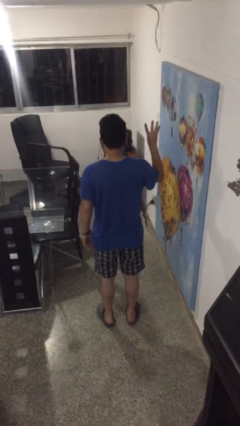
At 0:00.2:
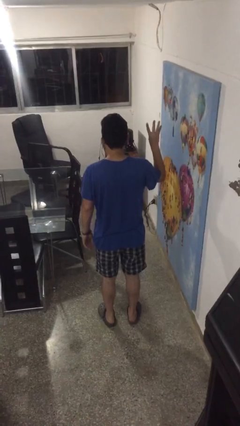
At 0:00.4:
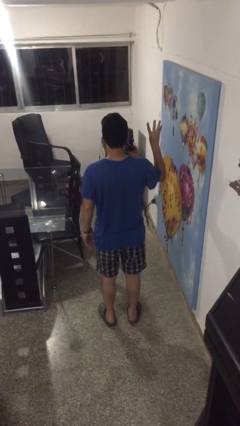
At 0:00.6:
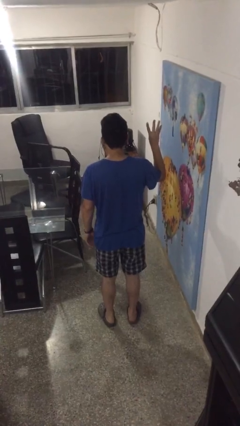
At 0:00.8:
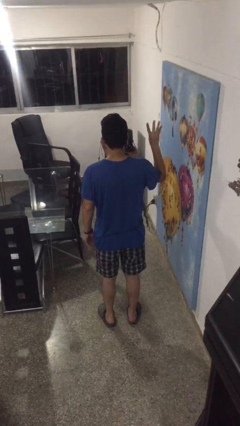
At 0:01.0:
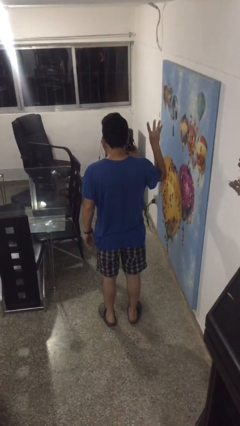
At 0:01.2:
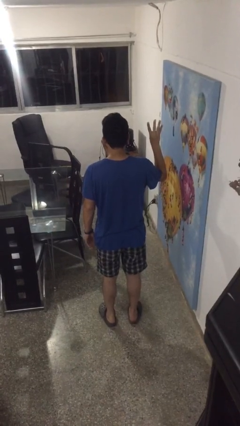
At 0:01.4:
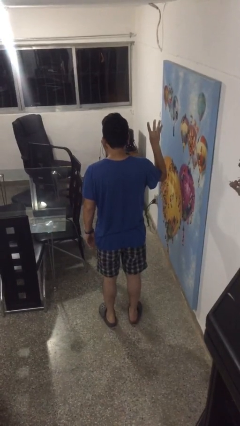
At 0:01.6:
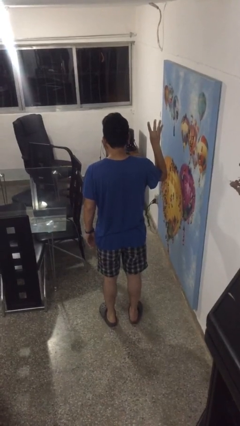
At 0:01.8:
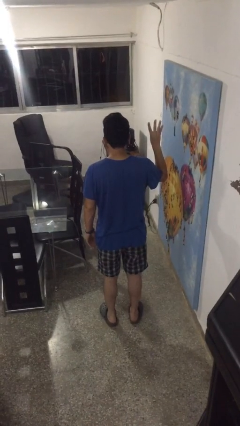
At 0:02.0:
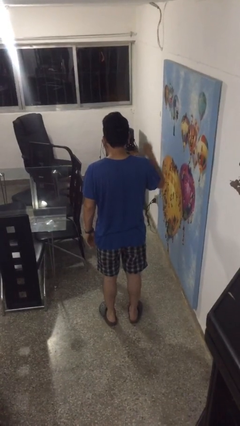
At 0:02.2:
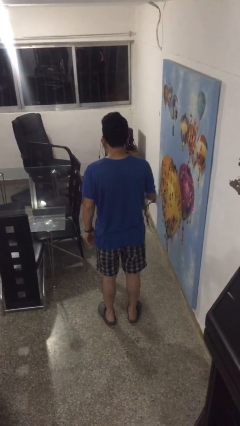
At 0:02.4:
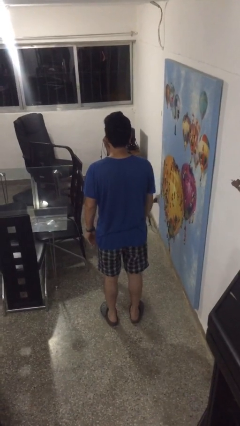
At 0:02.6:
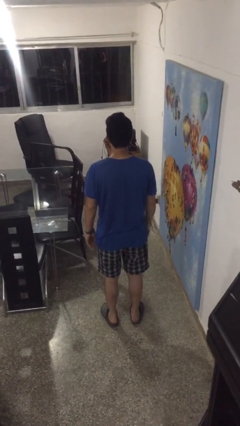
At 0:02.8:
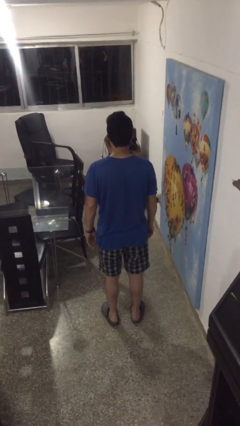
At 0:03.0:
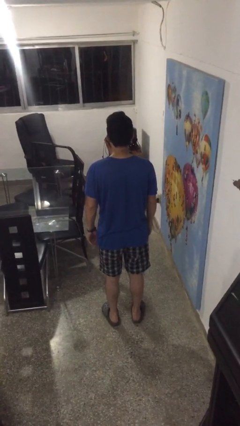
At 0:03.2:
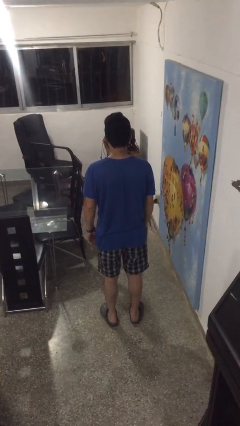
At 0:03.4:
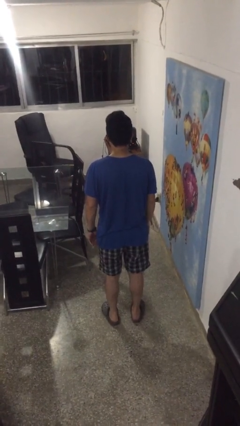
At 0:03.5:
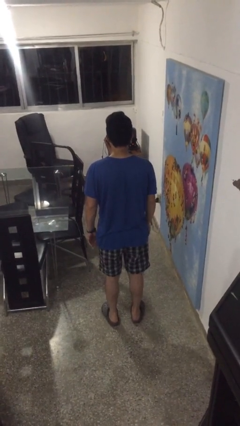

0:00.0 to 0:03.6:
person gestures number four

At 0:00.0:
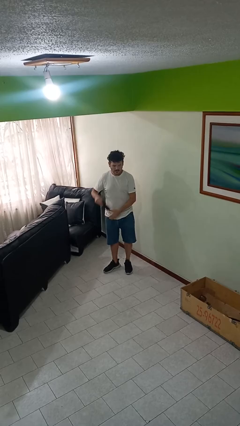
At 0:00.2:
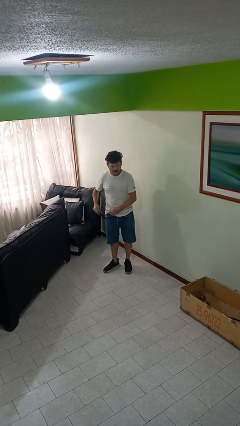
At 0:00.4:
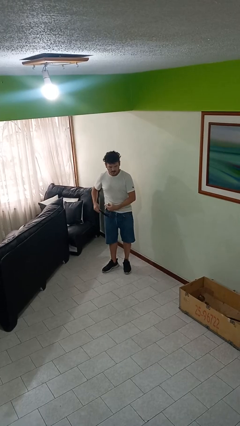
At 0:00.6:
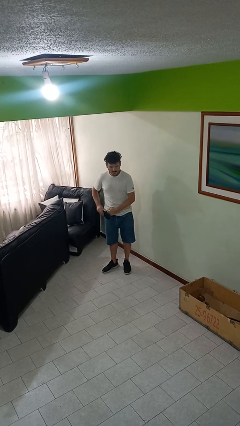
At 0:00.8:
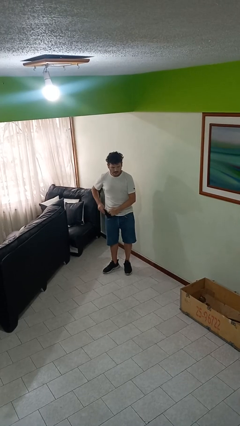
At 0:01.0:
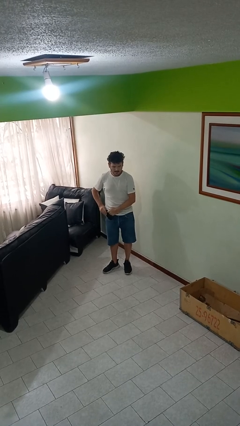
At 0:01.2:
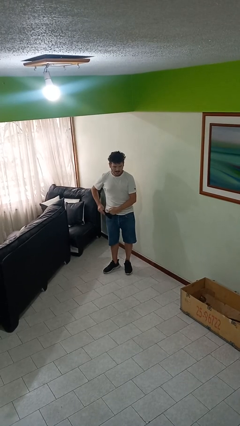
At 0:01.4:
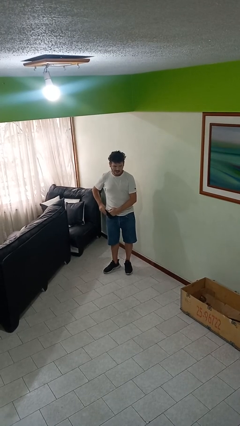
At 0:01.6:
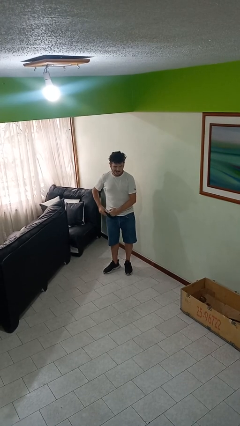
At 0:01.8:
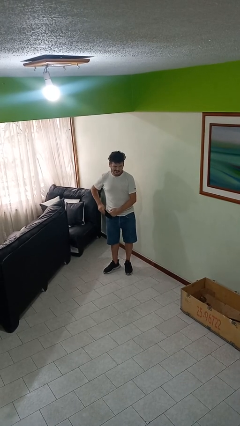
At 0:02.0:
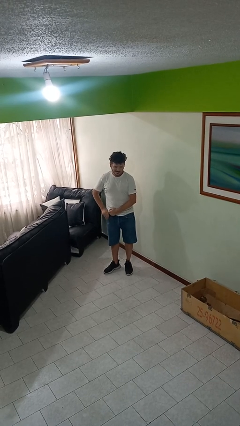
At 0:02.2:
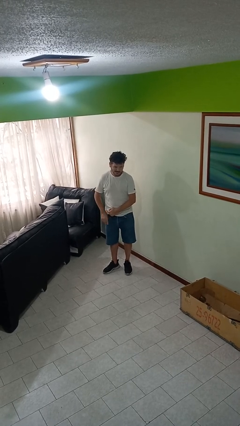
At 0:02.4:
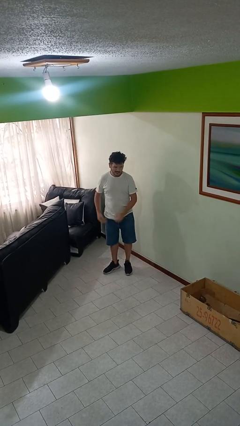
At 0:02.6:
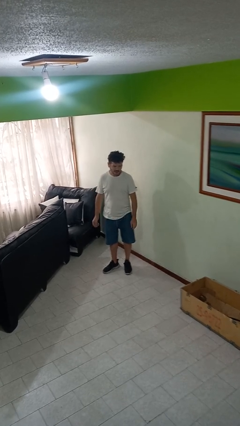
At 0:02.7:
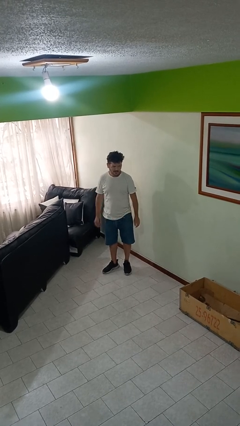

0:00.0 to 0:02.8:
person puts phone into pocket

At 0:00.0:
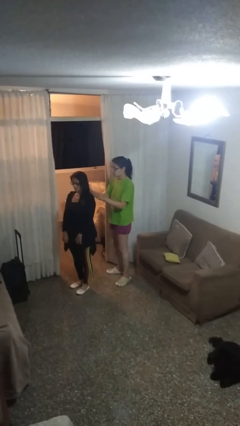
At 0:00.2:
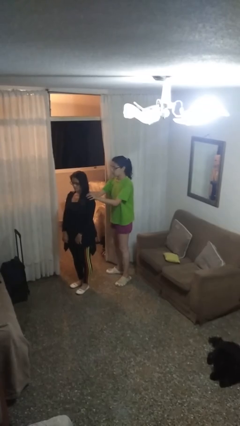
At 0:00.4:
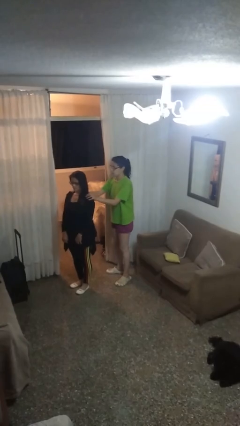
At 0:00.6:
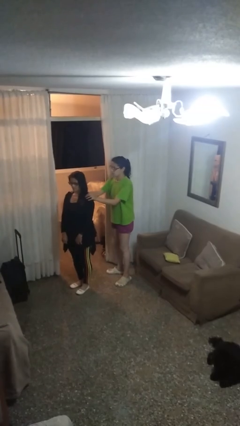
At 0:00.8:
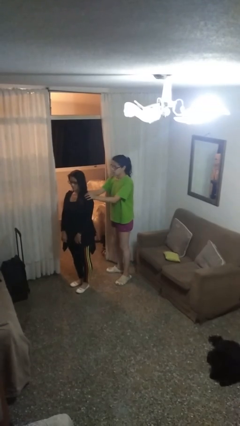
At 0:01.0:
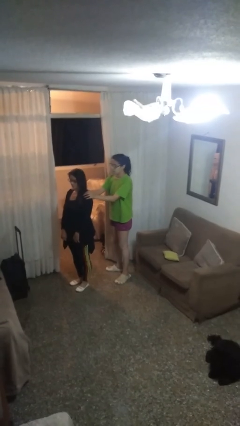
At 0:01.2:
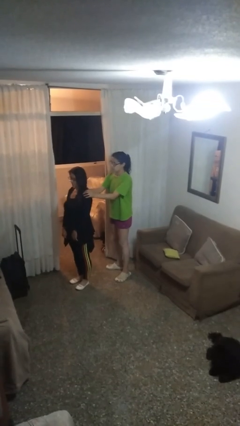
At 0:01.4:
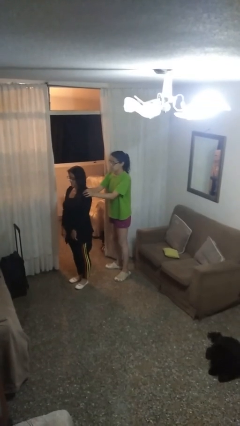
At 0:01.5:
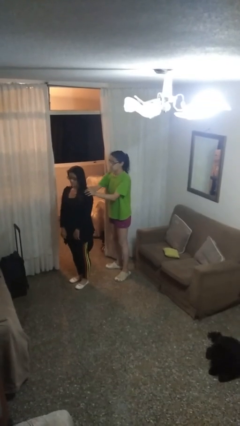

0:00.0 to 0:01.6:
person grabs person by shoulder

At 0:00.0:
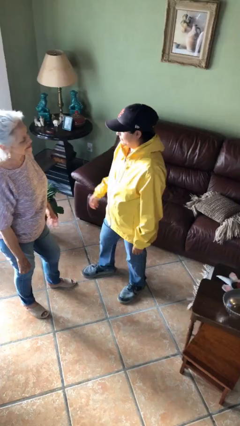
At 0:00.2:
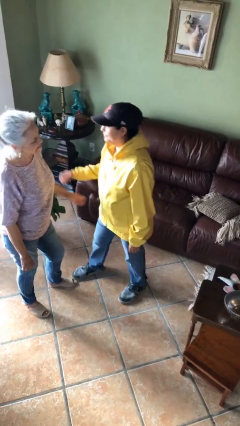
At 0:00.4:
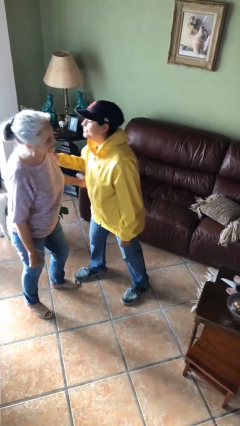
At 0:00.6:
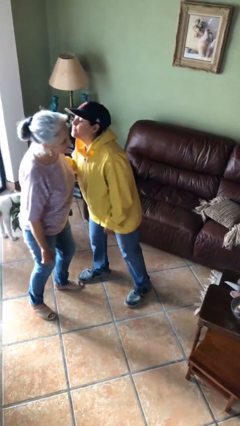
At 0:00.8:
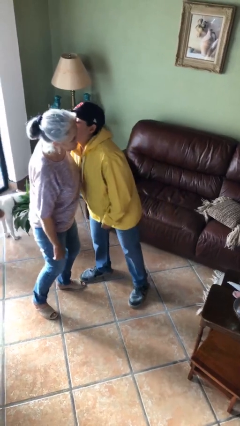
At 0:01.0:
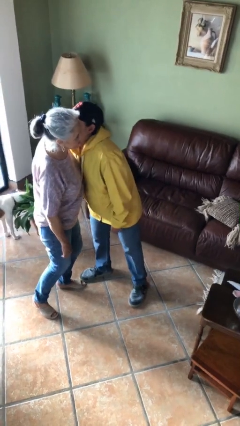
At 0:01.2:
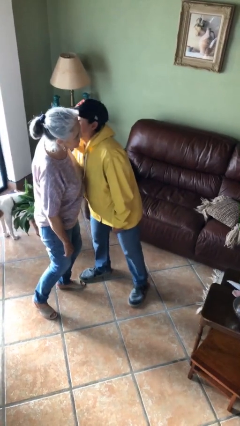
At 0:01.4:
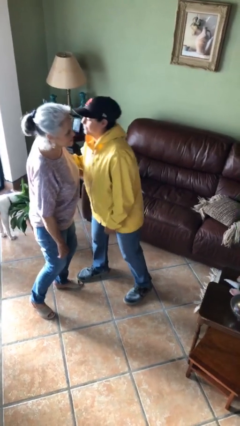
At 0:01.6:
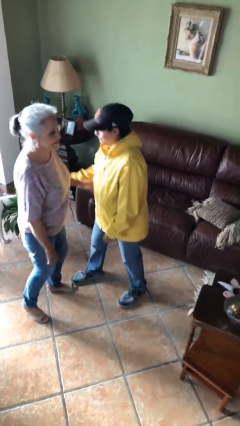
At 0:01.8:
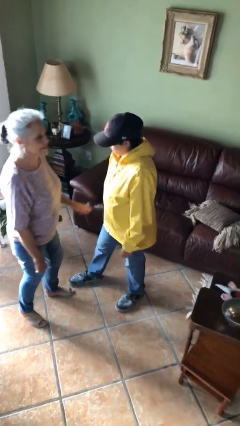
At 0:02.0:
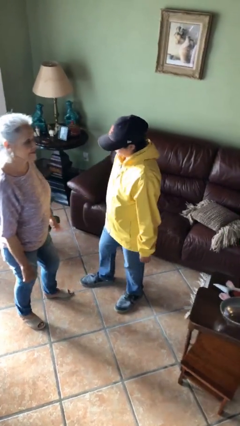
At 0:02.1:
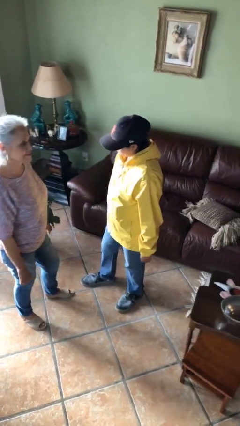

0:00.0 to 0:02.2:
person kisses cheek of person

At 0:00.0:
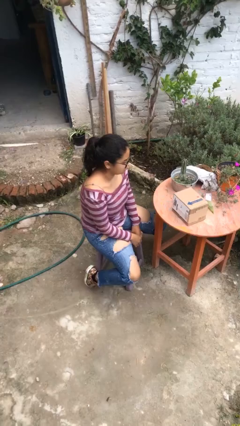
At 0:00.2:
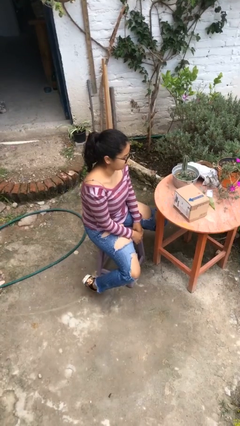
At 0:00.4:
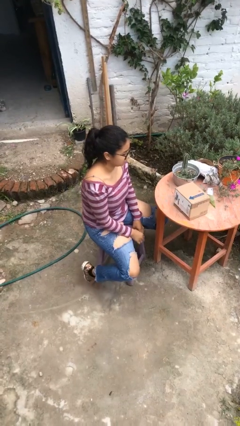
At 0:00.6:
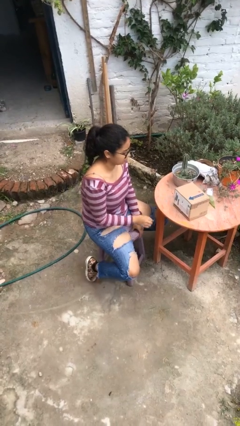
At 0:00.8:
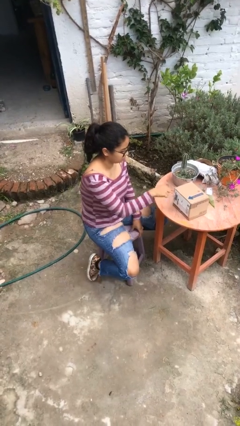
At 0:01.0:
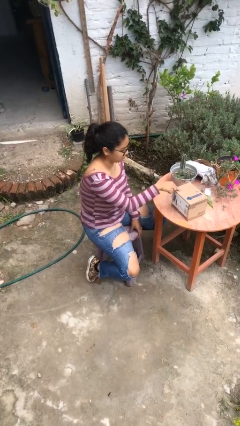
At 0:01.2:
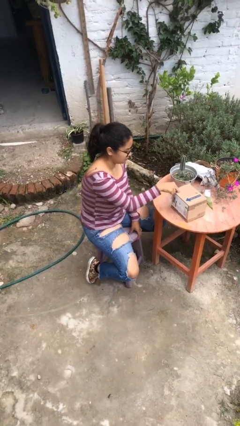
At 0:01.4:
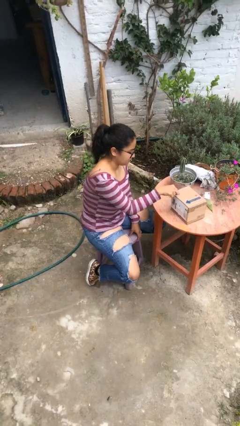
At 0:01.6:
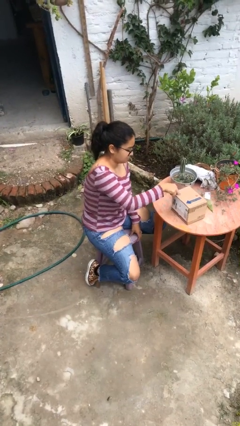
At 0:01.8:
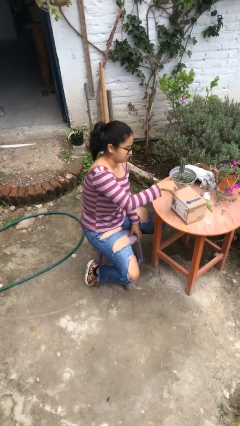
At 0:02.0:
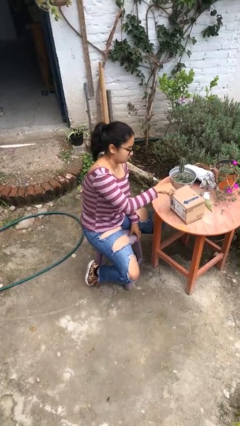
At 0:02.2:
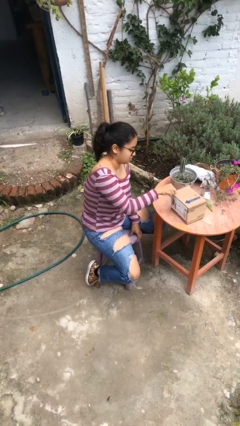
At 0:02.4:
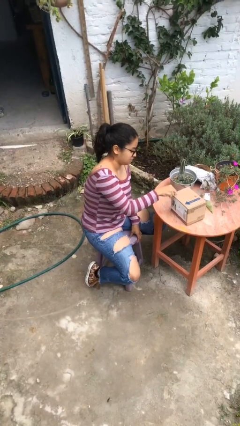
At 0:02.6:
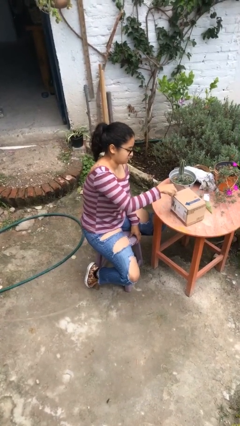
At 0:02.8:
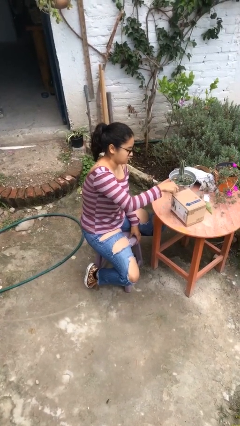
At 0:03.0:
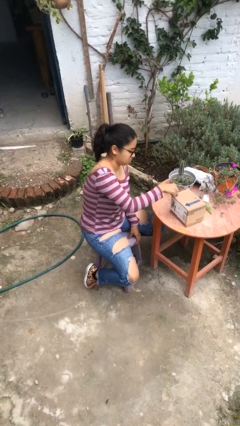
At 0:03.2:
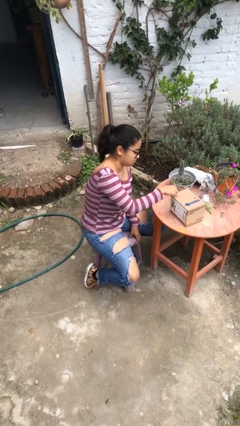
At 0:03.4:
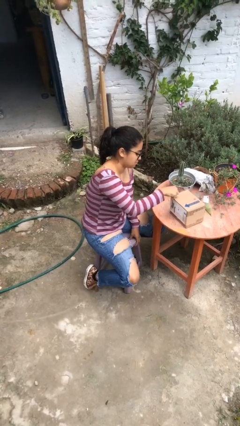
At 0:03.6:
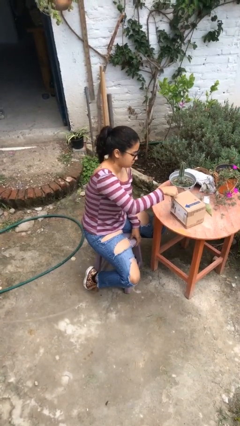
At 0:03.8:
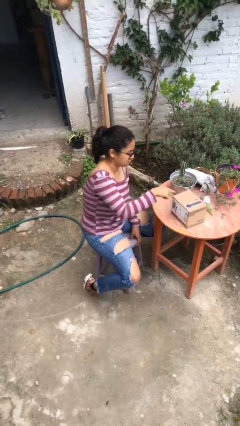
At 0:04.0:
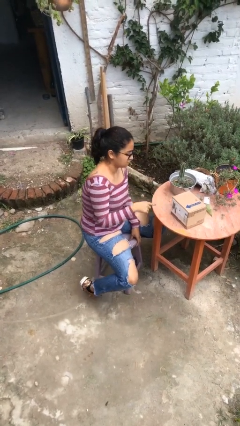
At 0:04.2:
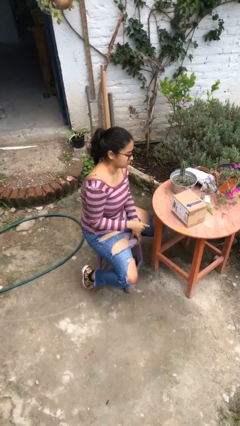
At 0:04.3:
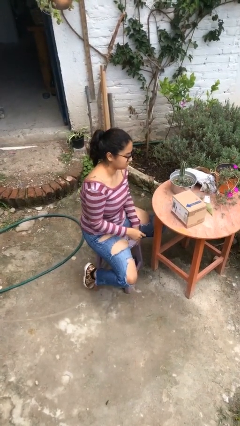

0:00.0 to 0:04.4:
person taps object with finger

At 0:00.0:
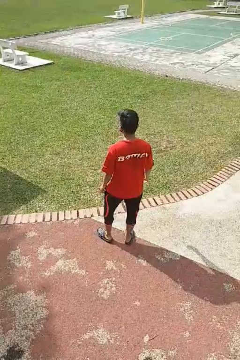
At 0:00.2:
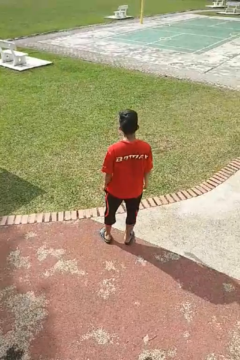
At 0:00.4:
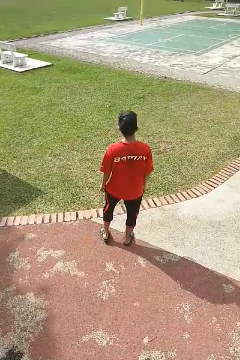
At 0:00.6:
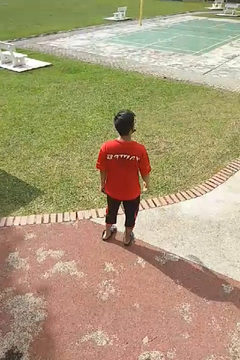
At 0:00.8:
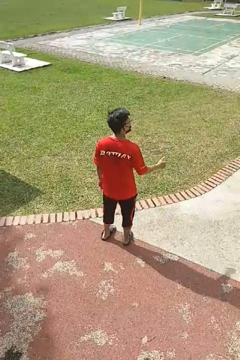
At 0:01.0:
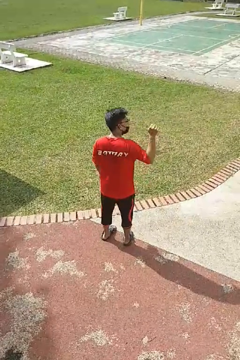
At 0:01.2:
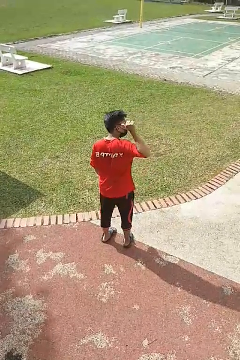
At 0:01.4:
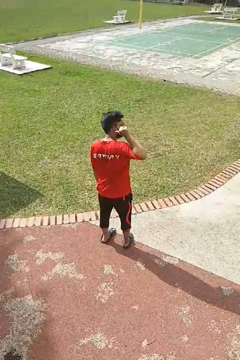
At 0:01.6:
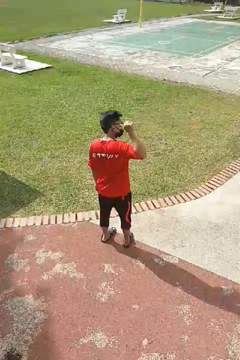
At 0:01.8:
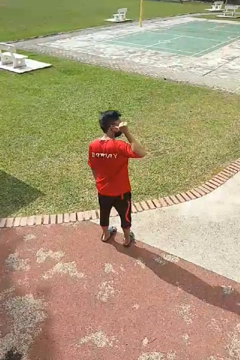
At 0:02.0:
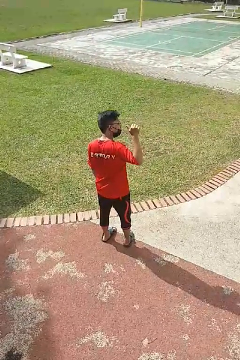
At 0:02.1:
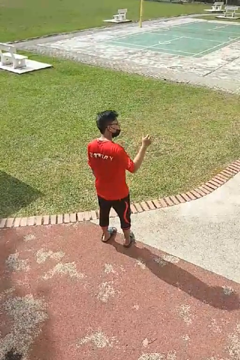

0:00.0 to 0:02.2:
person gestures behind me

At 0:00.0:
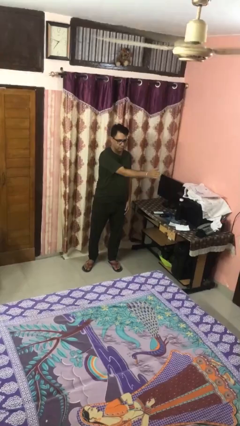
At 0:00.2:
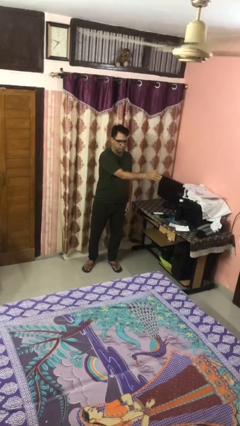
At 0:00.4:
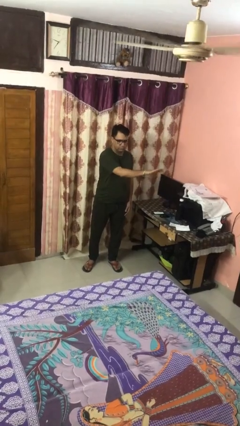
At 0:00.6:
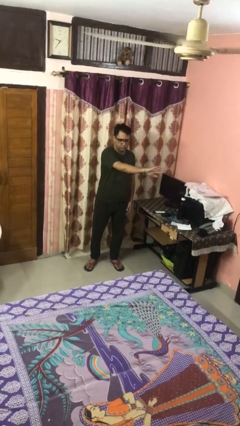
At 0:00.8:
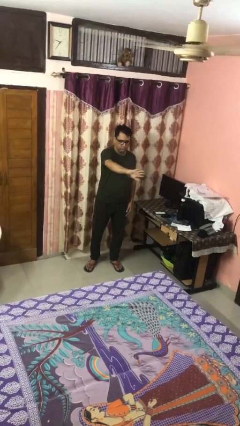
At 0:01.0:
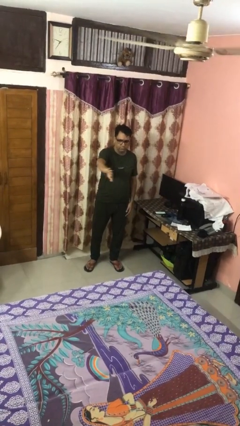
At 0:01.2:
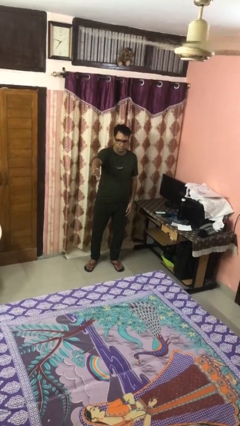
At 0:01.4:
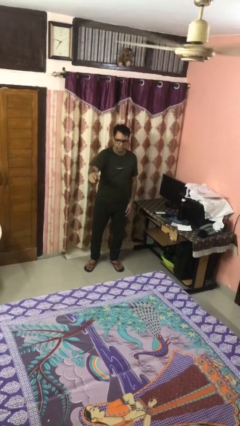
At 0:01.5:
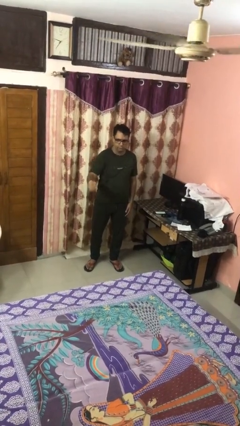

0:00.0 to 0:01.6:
person gestures swipe right
